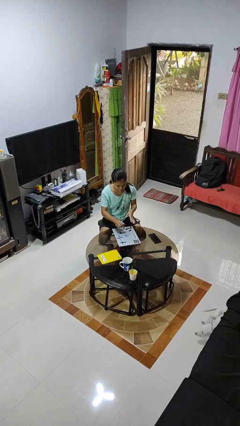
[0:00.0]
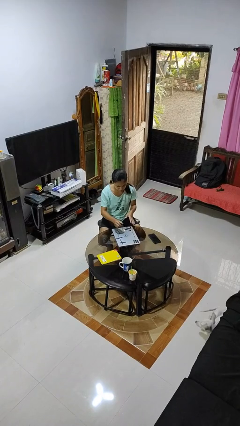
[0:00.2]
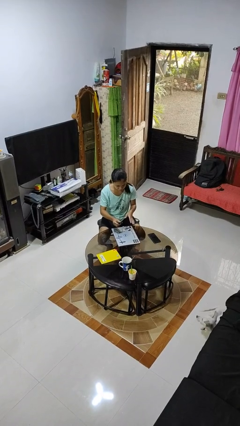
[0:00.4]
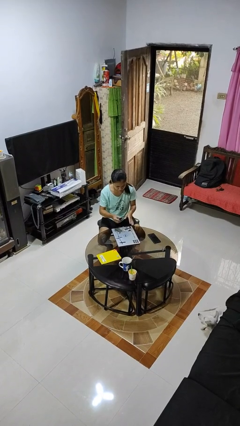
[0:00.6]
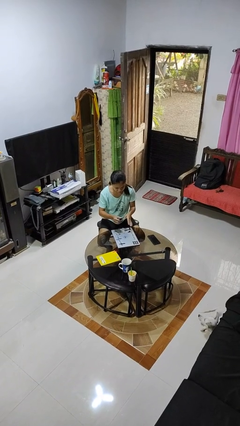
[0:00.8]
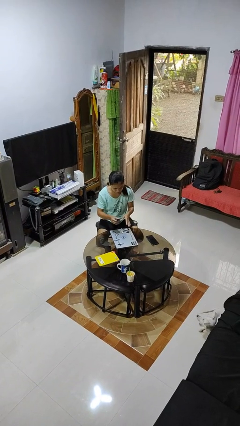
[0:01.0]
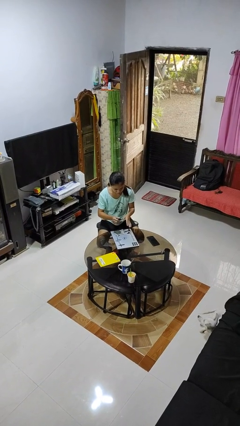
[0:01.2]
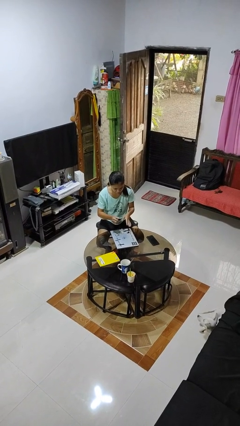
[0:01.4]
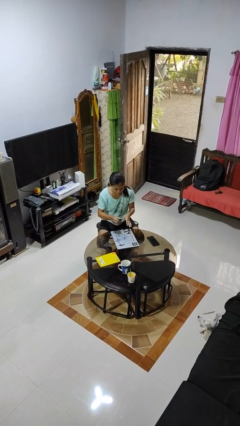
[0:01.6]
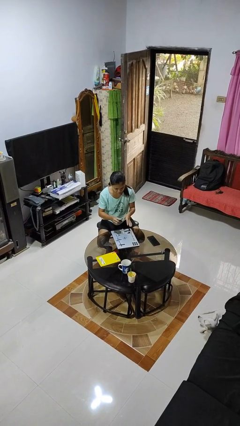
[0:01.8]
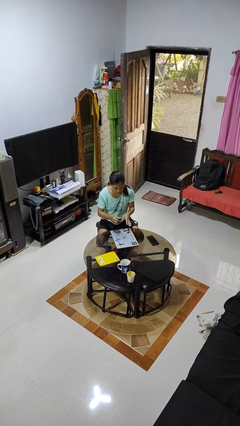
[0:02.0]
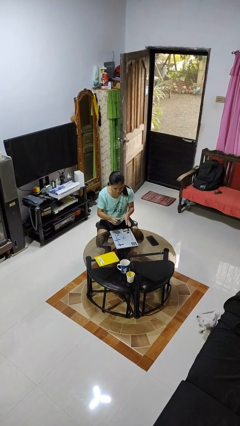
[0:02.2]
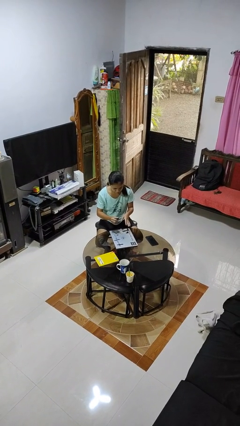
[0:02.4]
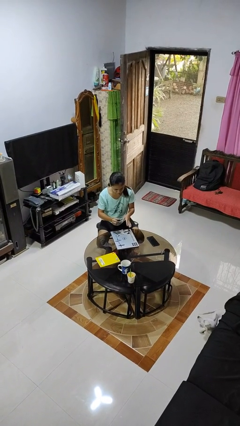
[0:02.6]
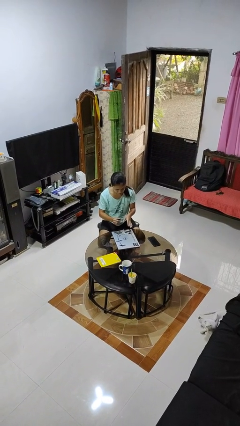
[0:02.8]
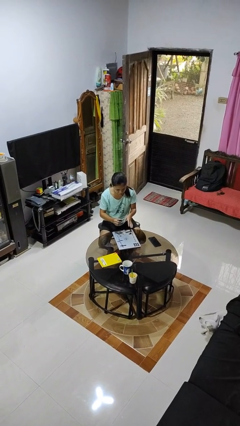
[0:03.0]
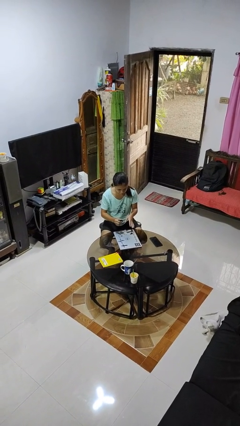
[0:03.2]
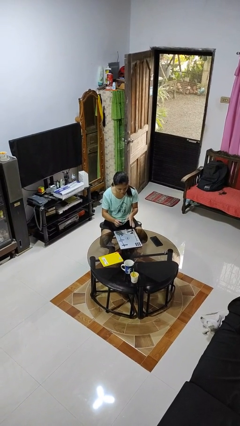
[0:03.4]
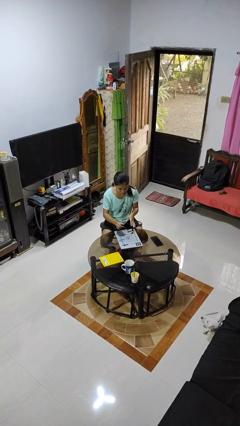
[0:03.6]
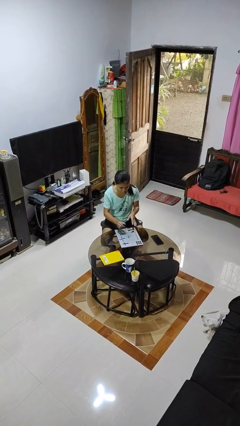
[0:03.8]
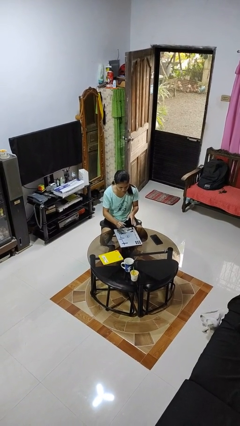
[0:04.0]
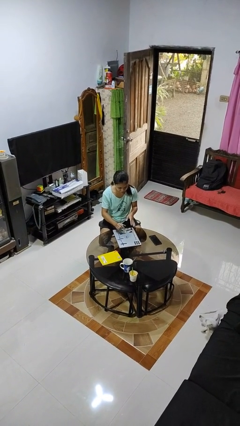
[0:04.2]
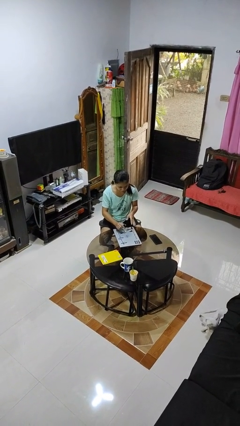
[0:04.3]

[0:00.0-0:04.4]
person paints fingernails

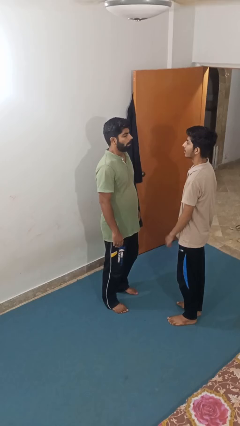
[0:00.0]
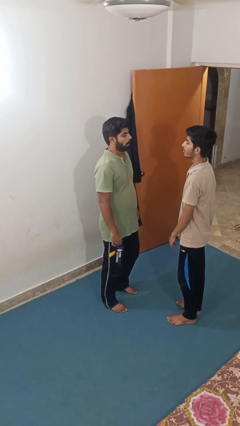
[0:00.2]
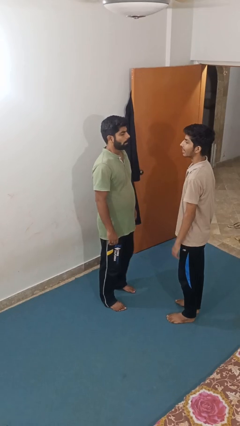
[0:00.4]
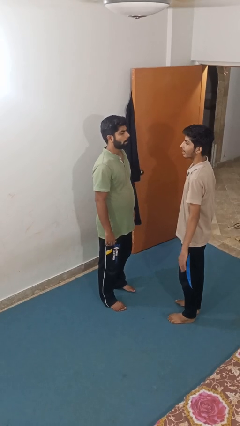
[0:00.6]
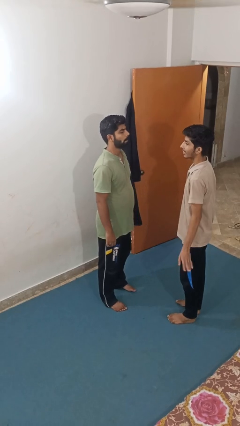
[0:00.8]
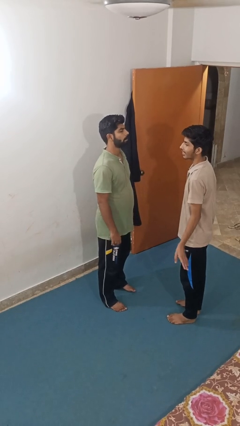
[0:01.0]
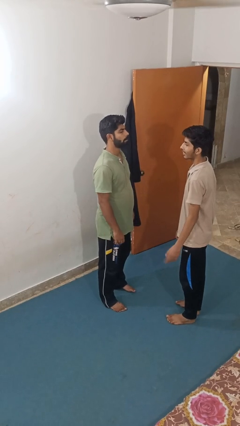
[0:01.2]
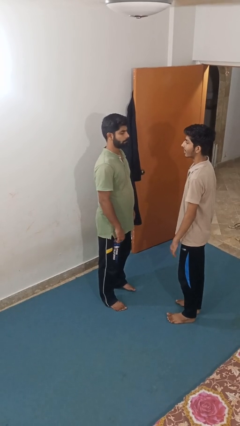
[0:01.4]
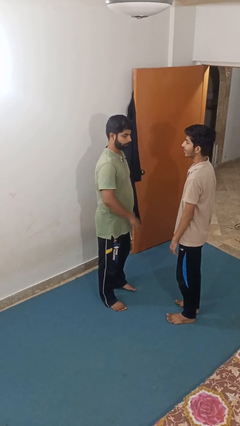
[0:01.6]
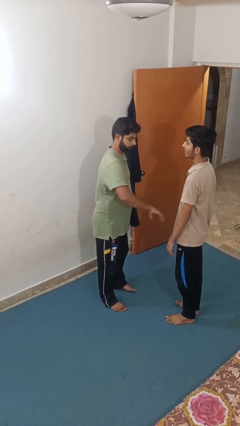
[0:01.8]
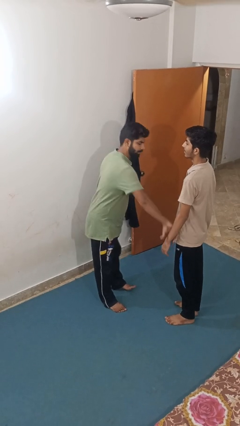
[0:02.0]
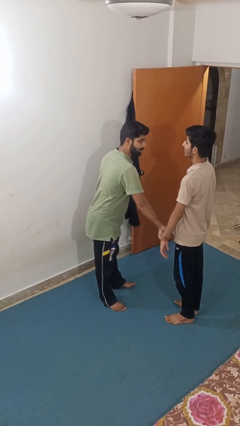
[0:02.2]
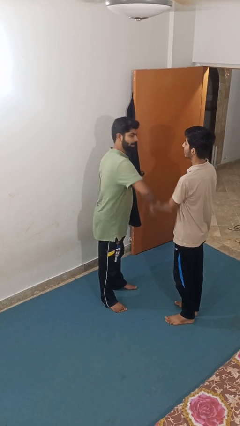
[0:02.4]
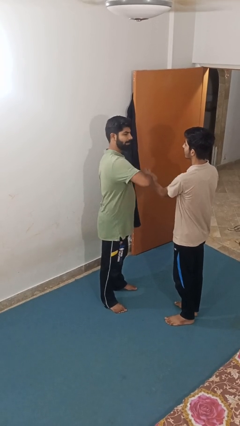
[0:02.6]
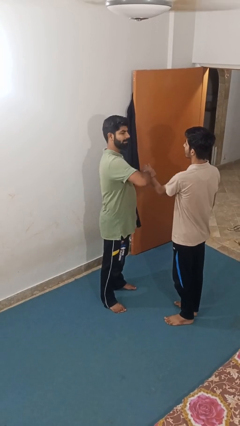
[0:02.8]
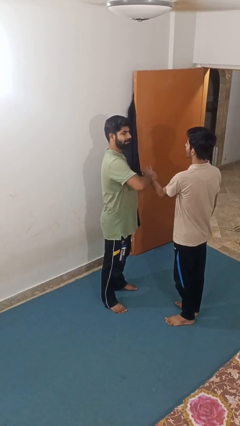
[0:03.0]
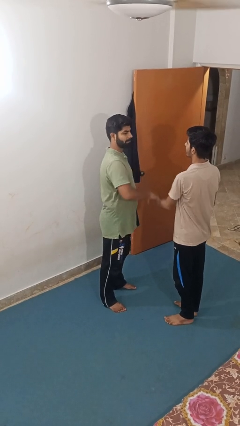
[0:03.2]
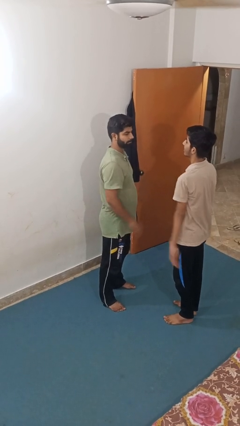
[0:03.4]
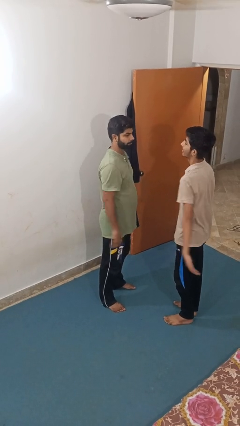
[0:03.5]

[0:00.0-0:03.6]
person grabs person by forearm

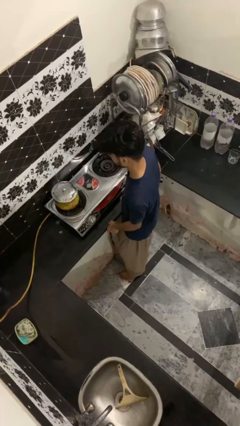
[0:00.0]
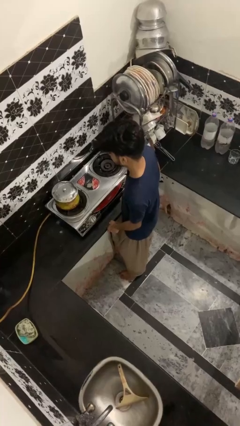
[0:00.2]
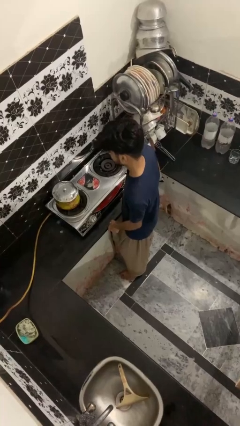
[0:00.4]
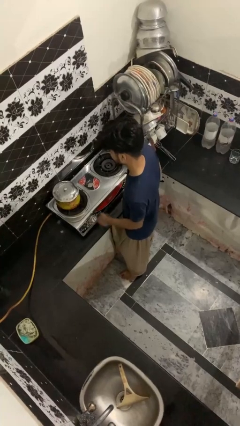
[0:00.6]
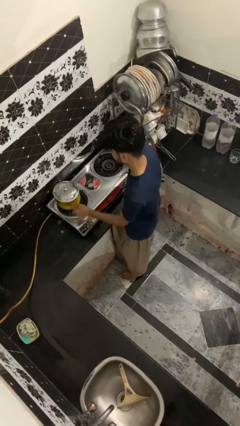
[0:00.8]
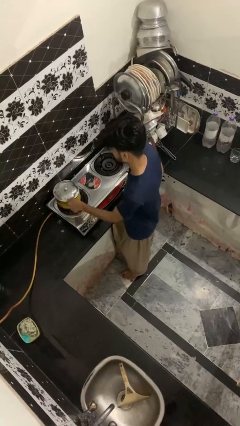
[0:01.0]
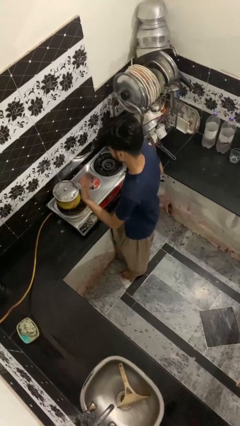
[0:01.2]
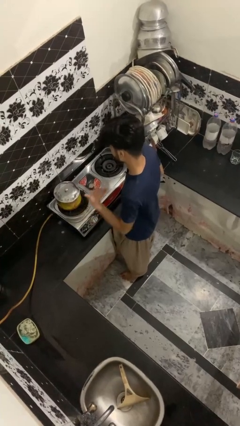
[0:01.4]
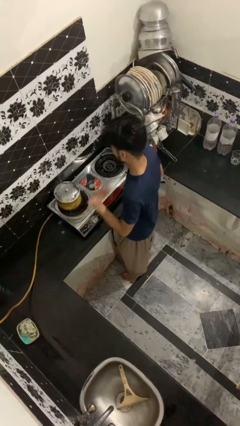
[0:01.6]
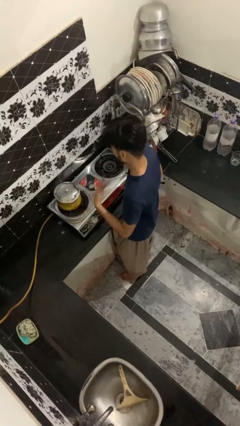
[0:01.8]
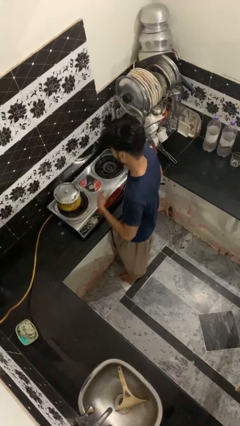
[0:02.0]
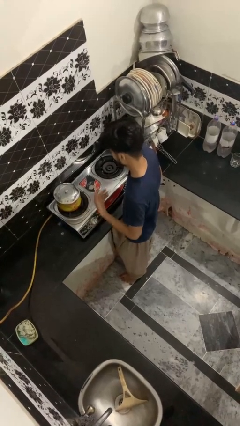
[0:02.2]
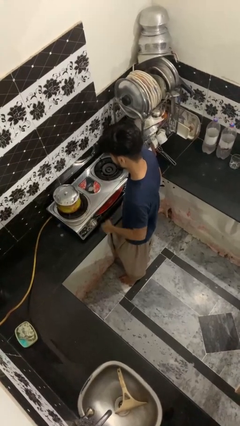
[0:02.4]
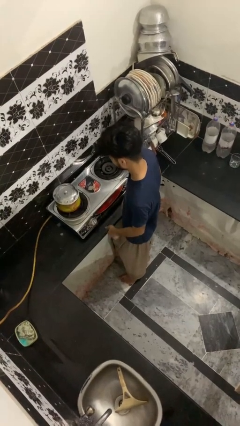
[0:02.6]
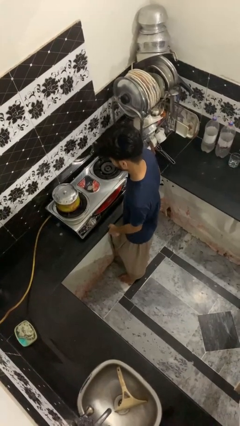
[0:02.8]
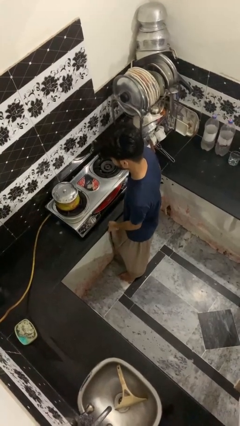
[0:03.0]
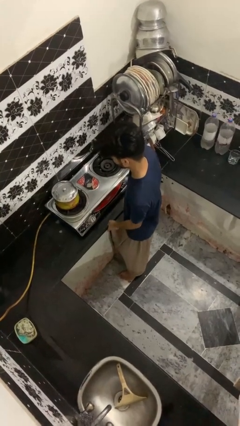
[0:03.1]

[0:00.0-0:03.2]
person burns hand

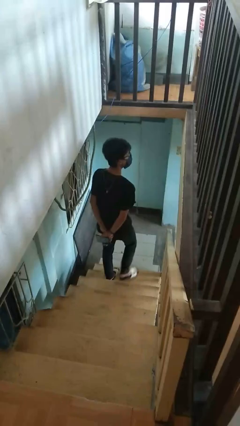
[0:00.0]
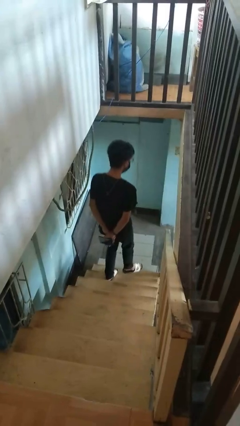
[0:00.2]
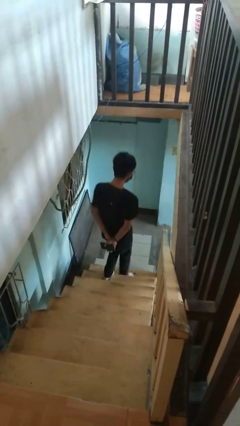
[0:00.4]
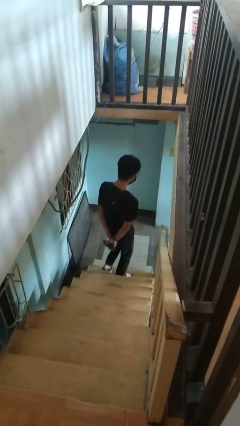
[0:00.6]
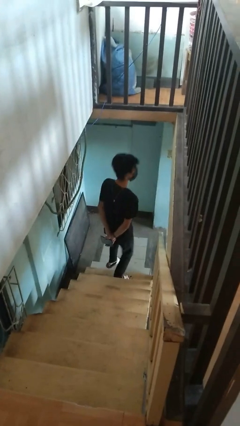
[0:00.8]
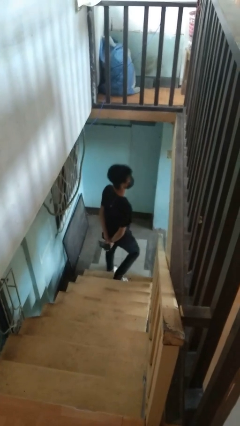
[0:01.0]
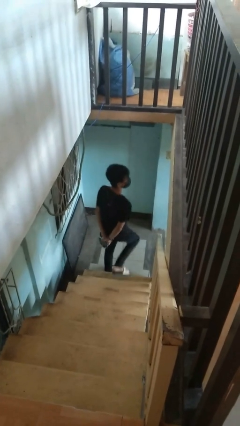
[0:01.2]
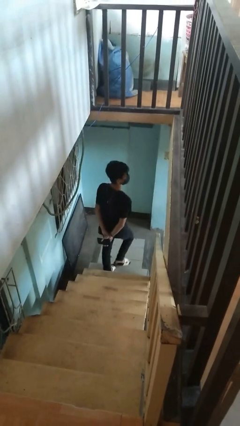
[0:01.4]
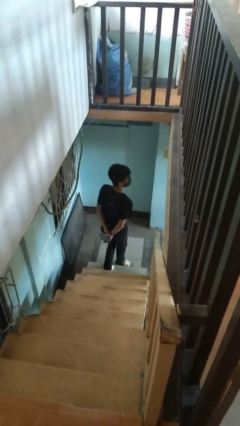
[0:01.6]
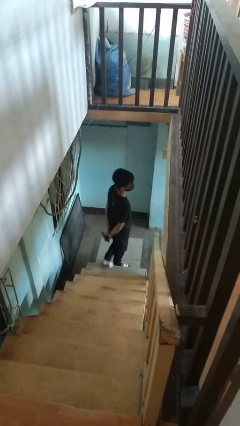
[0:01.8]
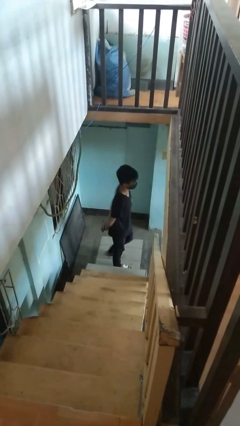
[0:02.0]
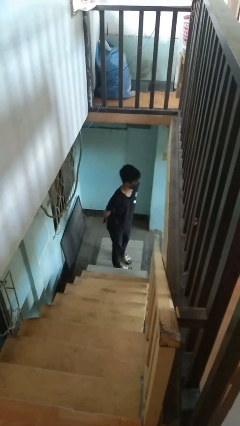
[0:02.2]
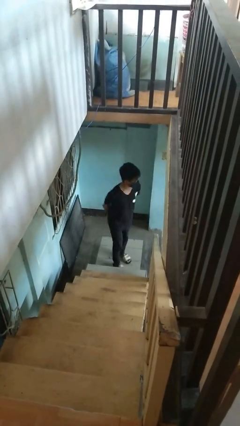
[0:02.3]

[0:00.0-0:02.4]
person climbs down ladder

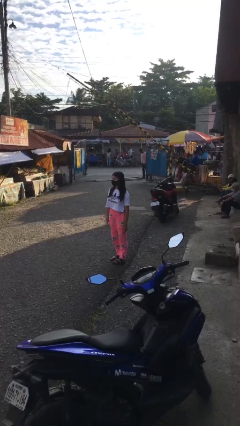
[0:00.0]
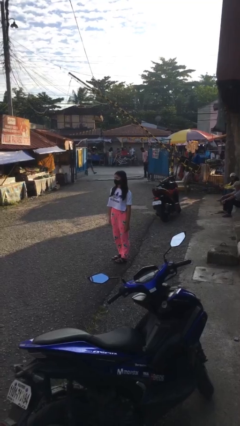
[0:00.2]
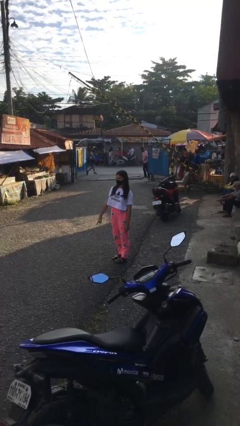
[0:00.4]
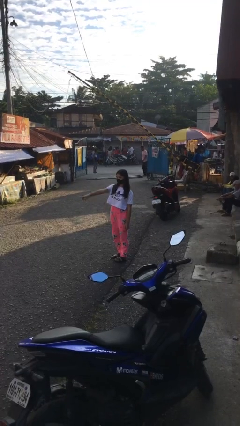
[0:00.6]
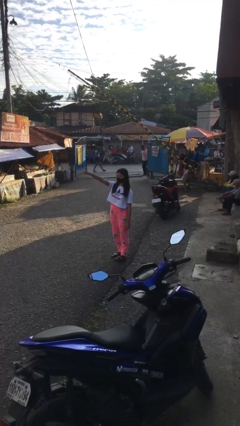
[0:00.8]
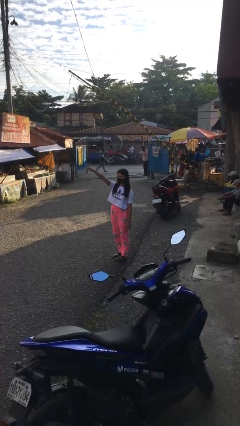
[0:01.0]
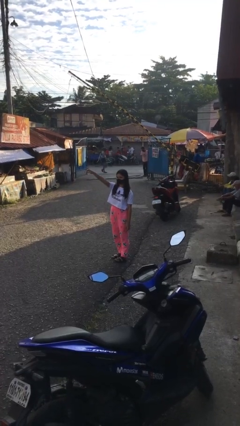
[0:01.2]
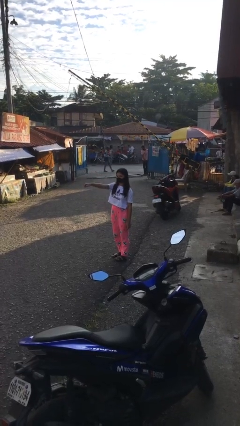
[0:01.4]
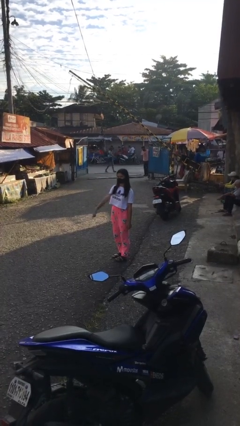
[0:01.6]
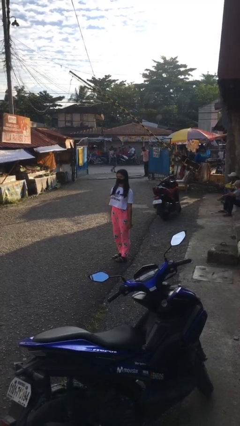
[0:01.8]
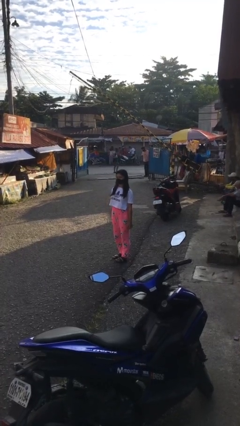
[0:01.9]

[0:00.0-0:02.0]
person points at person

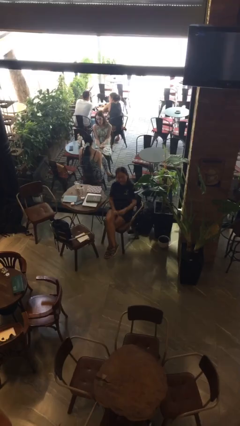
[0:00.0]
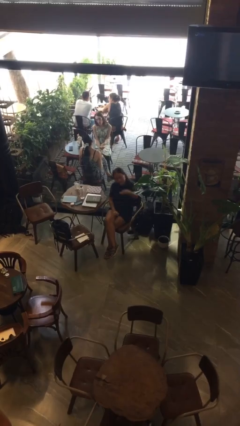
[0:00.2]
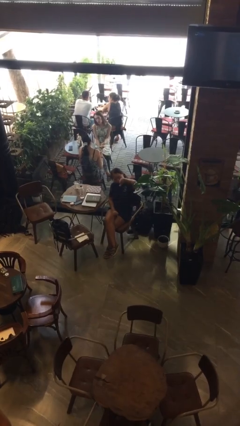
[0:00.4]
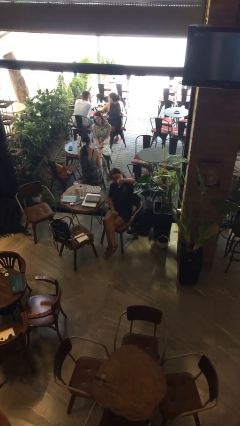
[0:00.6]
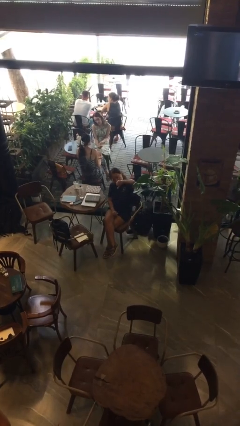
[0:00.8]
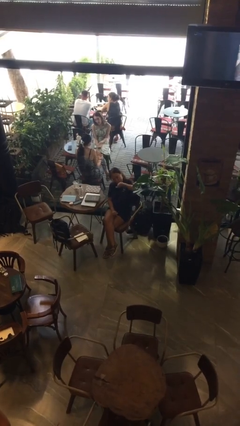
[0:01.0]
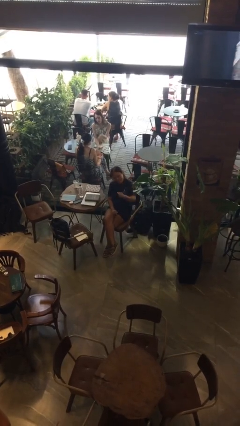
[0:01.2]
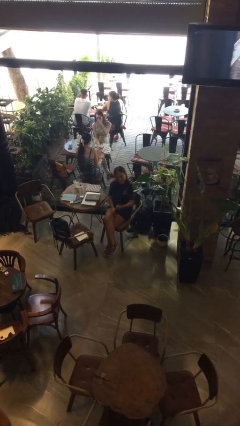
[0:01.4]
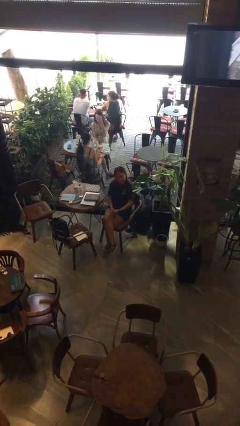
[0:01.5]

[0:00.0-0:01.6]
person gestures thumbs down
